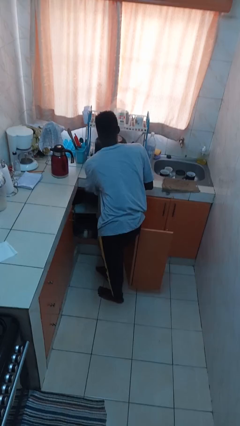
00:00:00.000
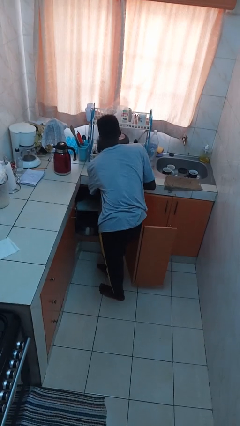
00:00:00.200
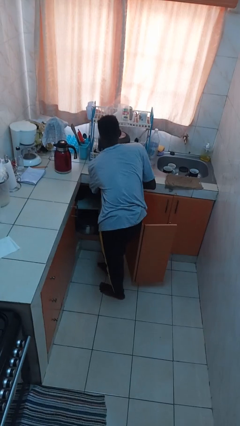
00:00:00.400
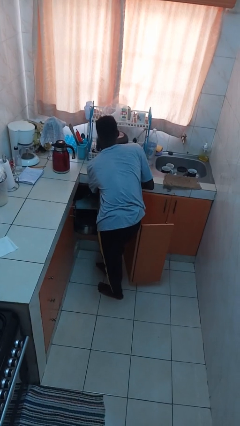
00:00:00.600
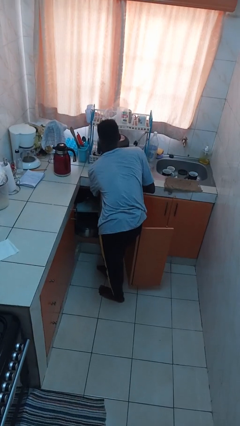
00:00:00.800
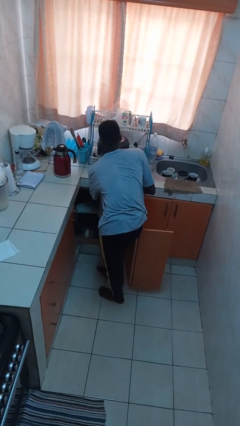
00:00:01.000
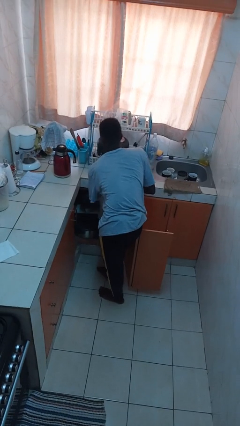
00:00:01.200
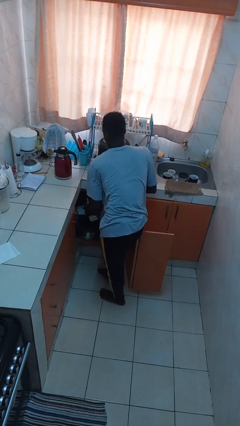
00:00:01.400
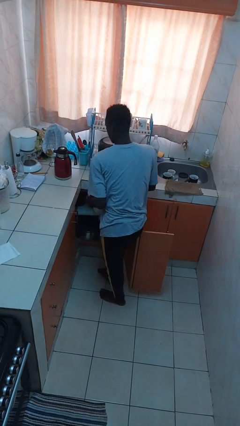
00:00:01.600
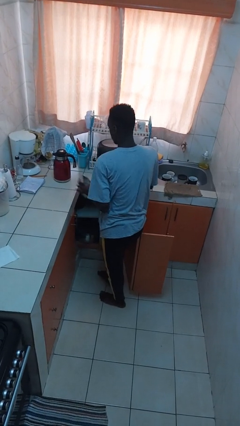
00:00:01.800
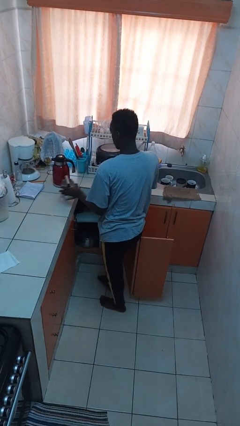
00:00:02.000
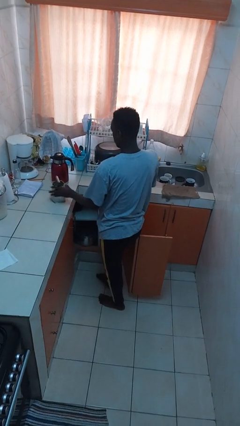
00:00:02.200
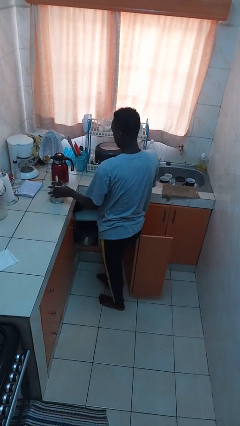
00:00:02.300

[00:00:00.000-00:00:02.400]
person takes object from cabinet

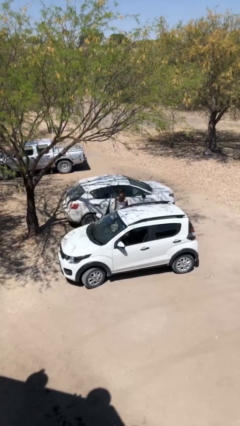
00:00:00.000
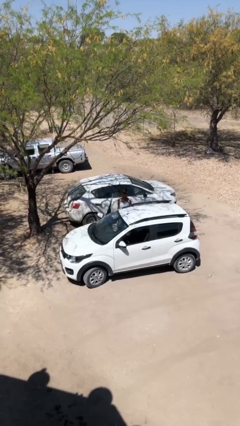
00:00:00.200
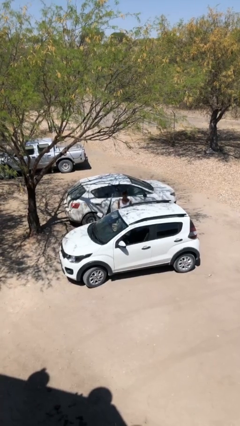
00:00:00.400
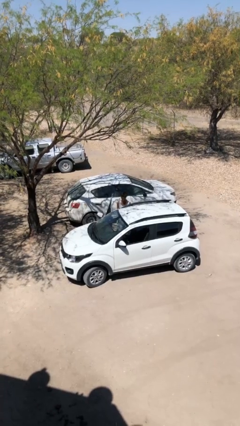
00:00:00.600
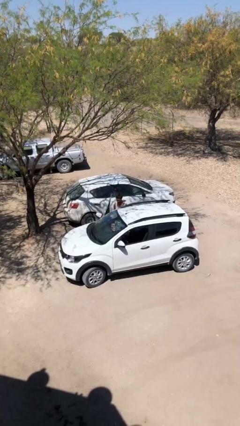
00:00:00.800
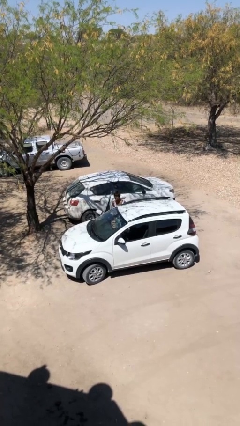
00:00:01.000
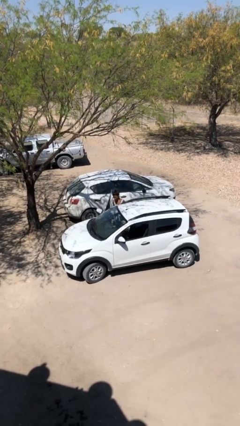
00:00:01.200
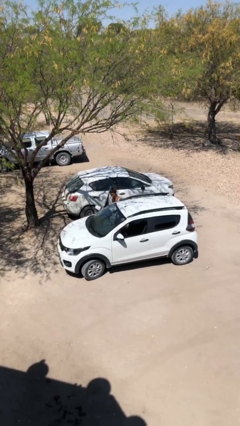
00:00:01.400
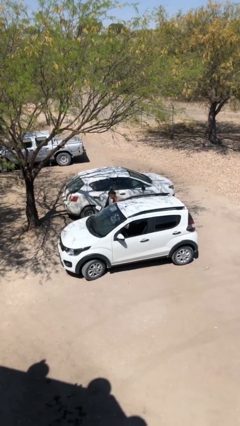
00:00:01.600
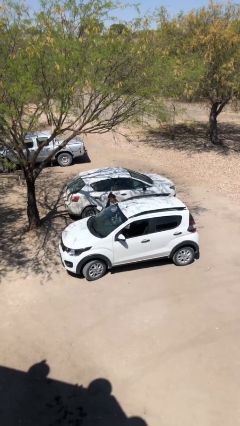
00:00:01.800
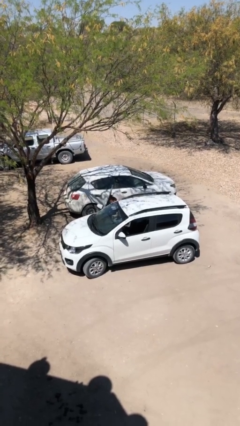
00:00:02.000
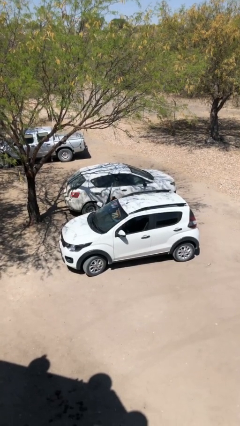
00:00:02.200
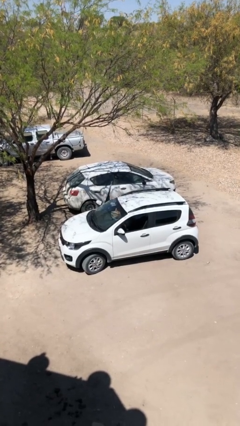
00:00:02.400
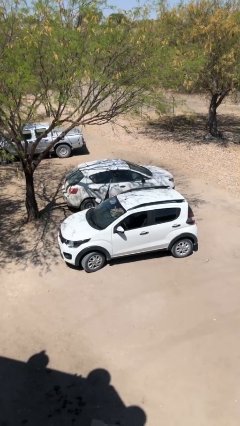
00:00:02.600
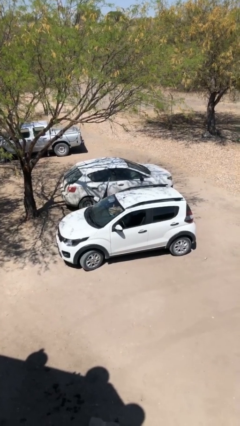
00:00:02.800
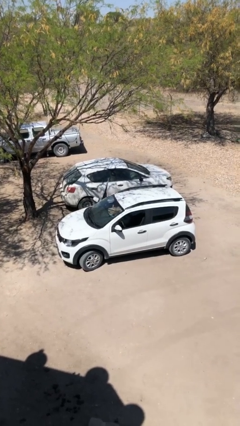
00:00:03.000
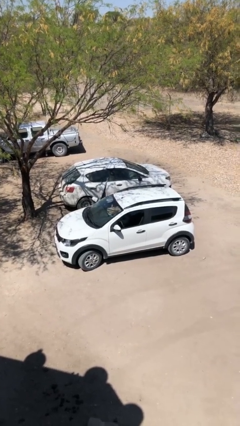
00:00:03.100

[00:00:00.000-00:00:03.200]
person enters car

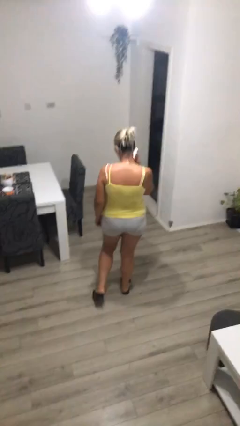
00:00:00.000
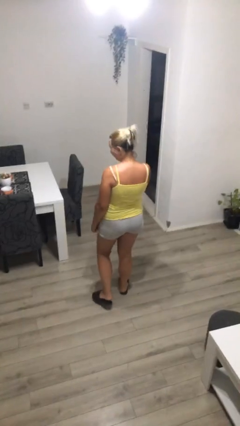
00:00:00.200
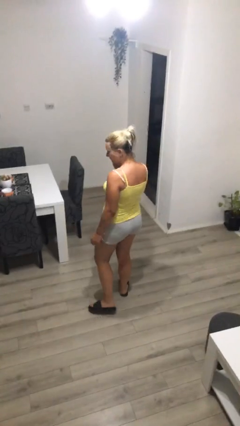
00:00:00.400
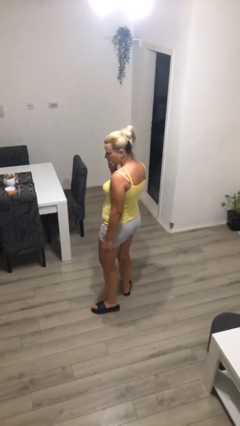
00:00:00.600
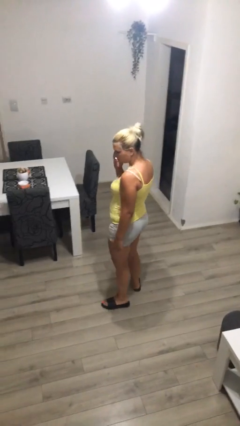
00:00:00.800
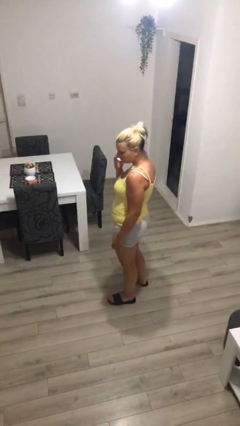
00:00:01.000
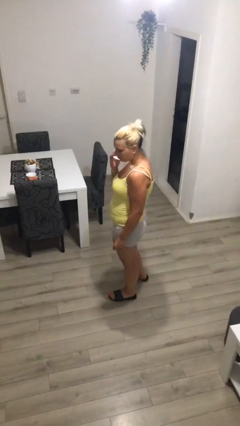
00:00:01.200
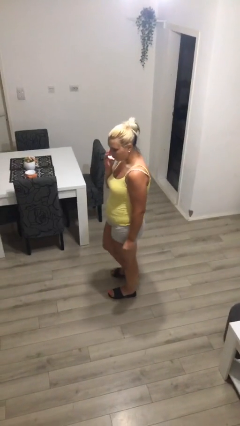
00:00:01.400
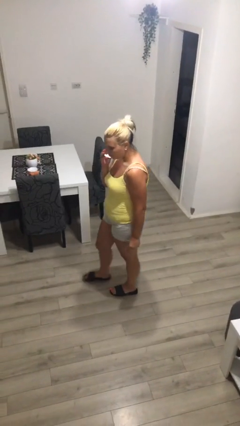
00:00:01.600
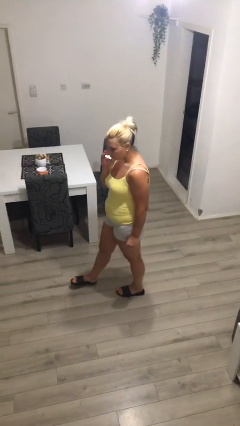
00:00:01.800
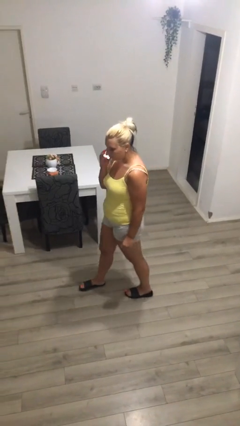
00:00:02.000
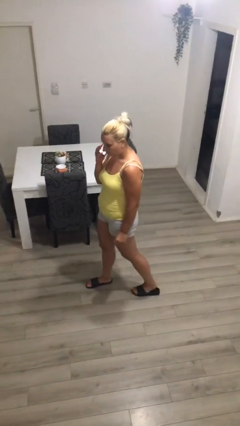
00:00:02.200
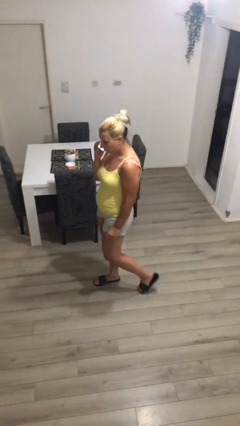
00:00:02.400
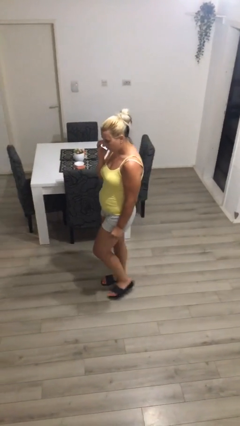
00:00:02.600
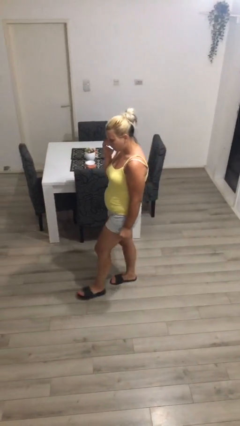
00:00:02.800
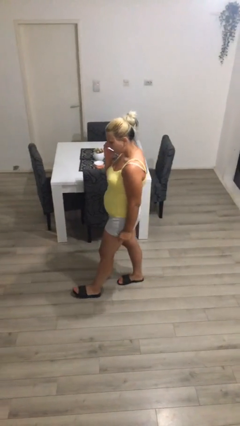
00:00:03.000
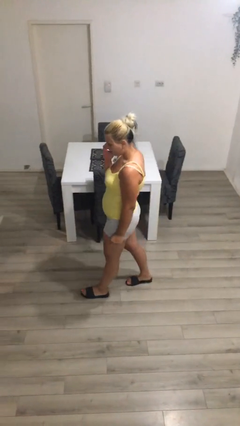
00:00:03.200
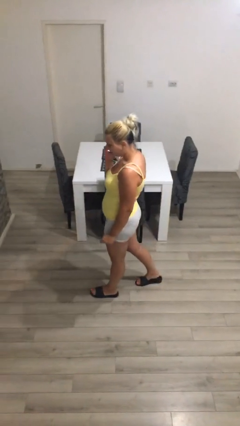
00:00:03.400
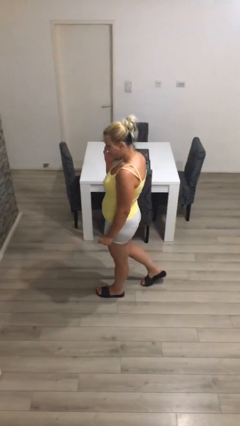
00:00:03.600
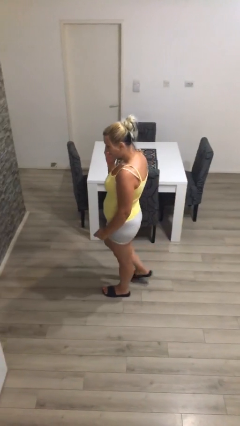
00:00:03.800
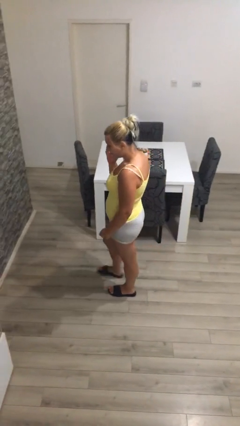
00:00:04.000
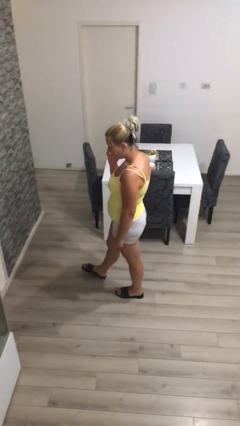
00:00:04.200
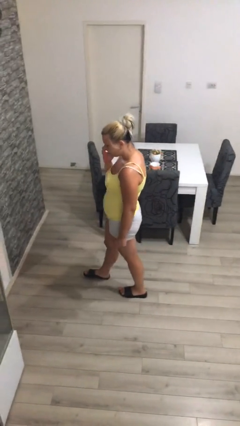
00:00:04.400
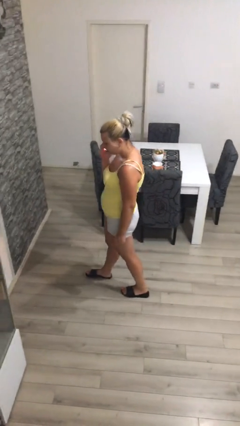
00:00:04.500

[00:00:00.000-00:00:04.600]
person talks on phone

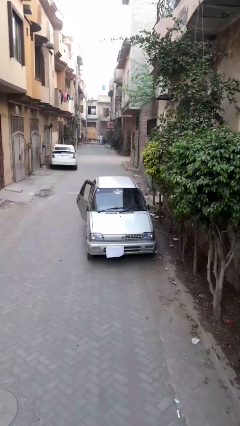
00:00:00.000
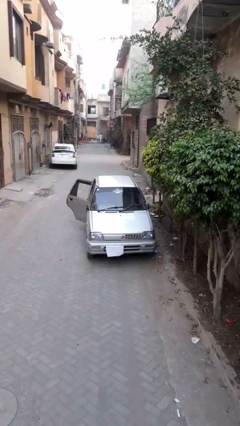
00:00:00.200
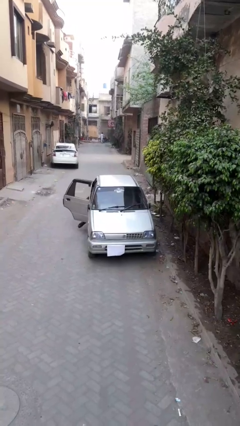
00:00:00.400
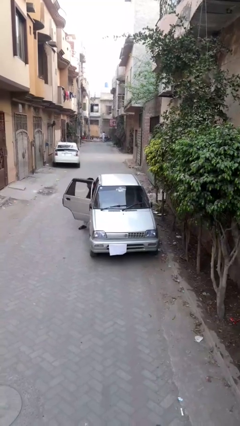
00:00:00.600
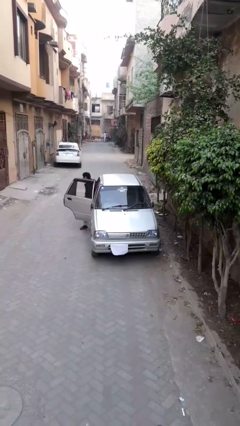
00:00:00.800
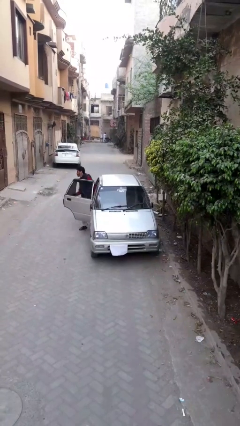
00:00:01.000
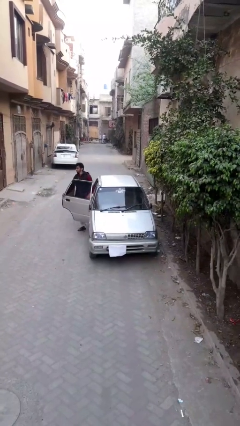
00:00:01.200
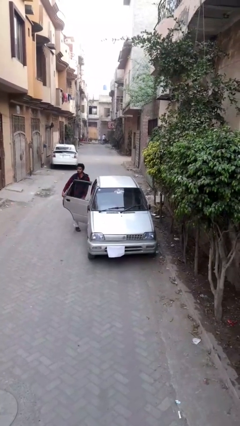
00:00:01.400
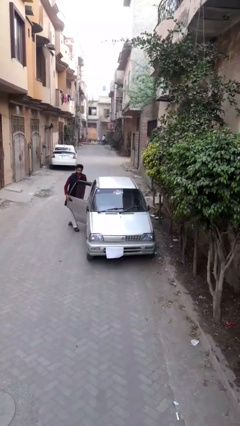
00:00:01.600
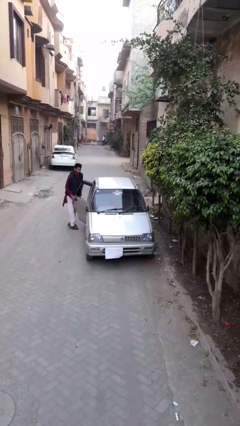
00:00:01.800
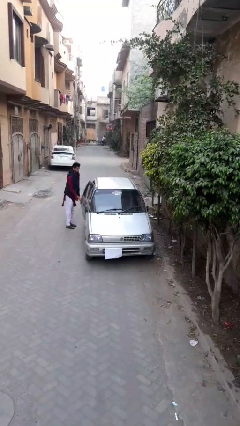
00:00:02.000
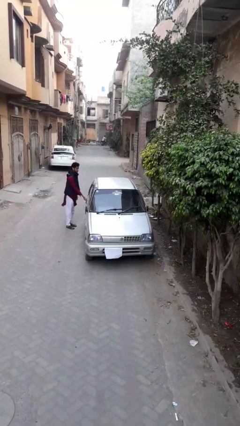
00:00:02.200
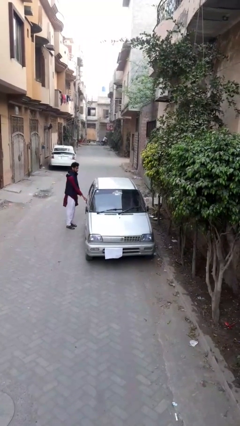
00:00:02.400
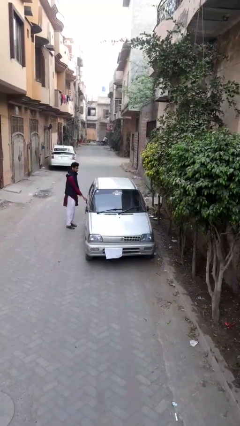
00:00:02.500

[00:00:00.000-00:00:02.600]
car drops off person

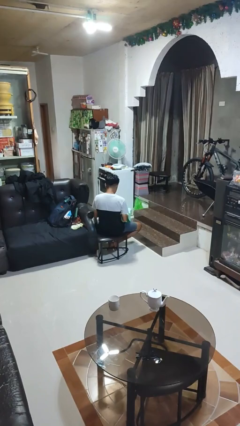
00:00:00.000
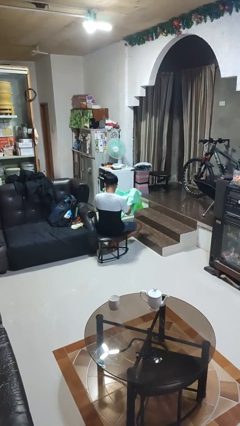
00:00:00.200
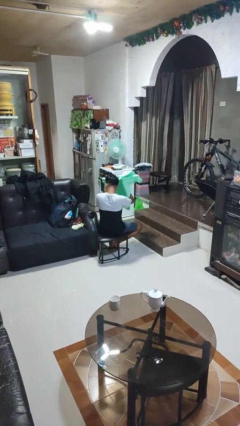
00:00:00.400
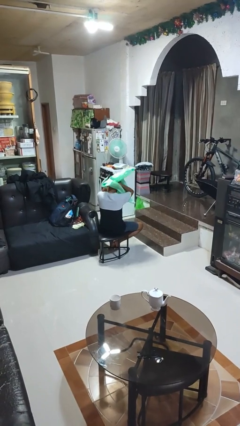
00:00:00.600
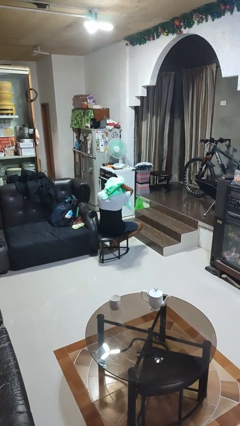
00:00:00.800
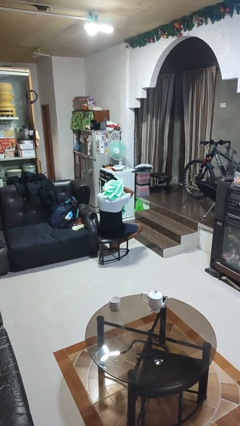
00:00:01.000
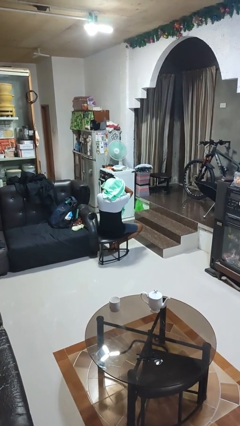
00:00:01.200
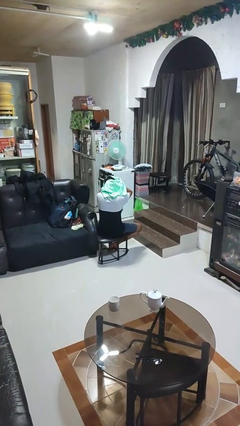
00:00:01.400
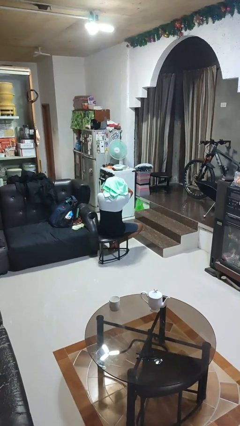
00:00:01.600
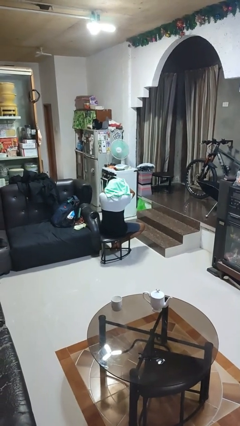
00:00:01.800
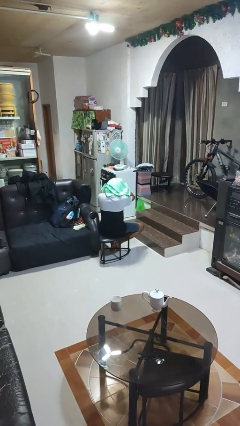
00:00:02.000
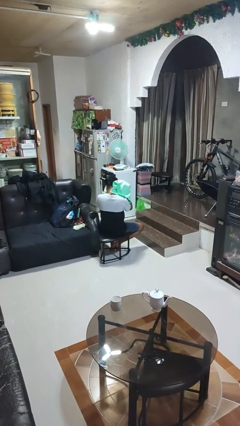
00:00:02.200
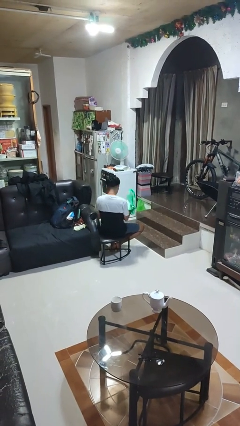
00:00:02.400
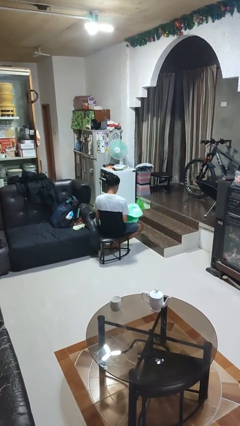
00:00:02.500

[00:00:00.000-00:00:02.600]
person dries hair with hairdryer

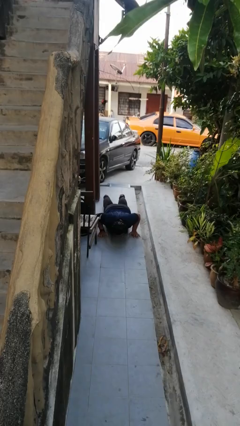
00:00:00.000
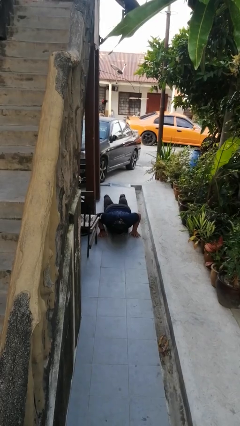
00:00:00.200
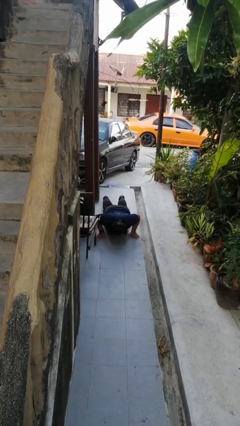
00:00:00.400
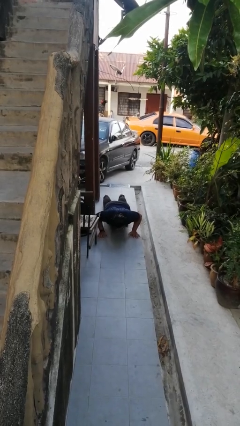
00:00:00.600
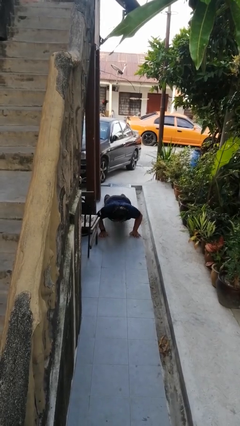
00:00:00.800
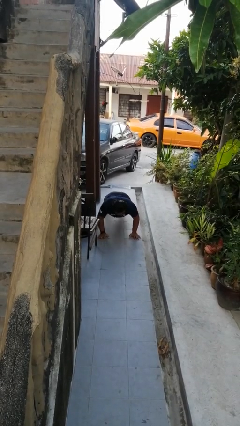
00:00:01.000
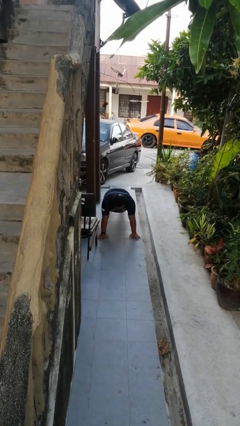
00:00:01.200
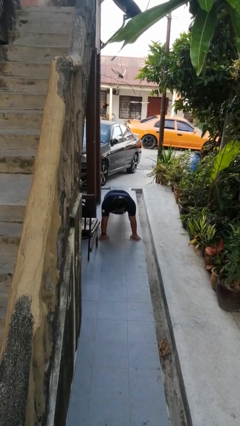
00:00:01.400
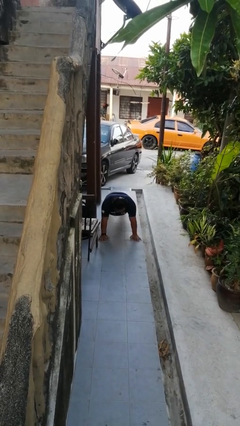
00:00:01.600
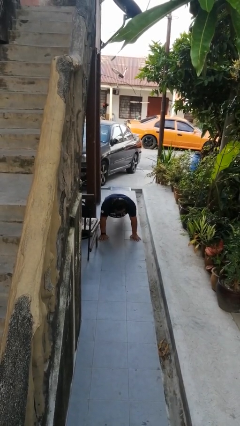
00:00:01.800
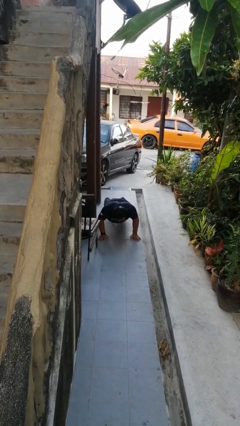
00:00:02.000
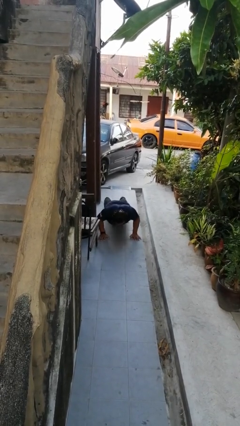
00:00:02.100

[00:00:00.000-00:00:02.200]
person exercises with pushup
